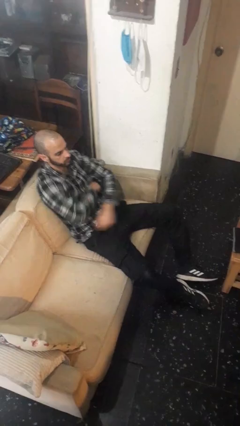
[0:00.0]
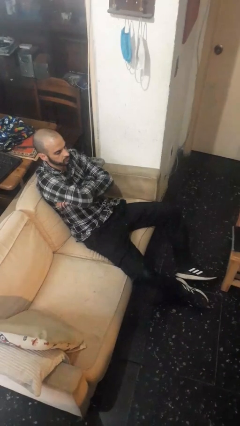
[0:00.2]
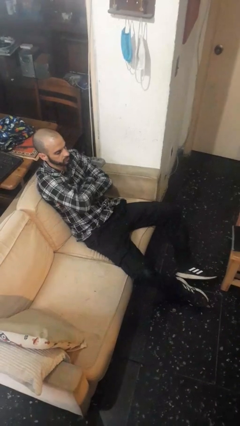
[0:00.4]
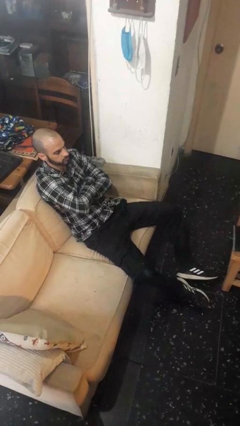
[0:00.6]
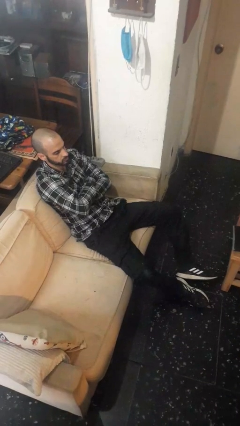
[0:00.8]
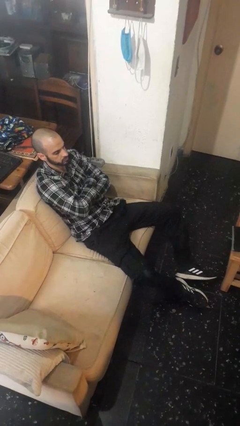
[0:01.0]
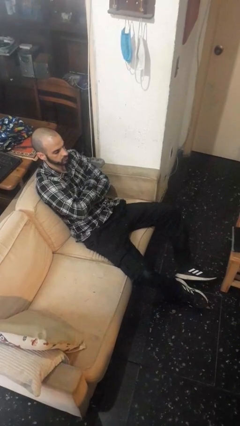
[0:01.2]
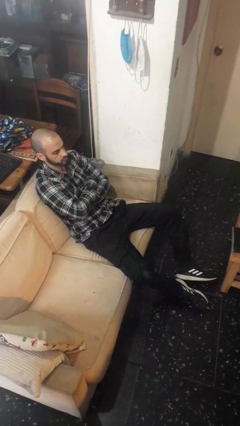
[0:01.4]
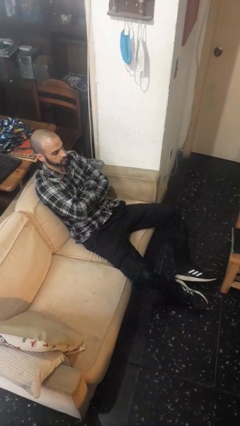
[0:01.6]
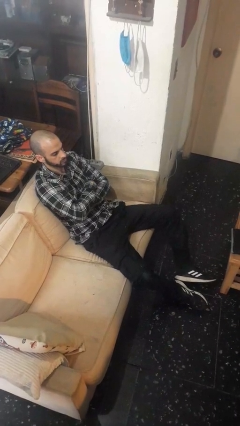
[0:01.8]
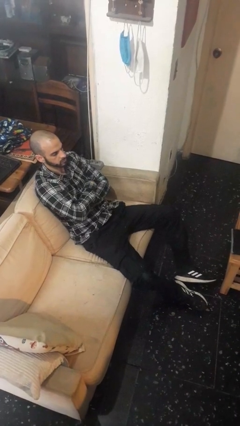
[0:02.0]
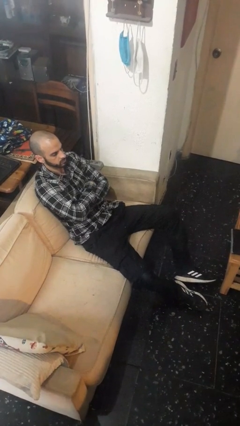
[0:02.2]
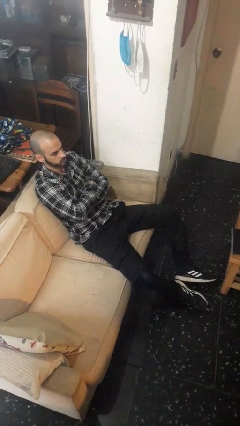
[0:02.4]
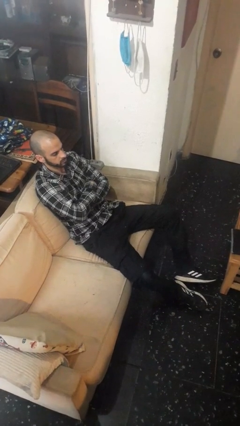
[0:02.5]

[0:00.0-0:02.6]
person crosses arms

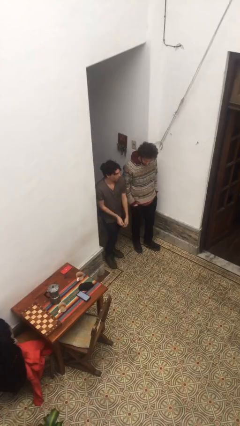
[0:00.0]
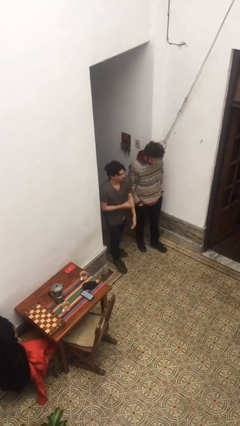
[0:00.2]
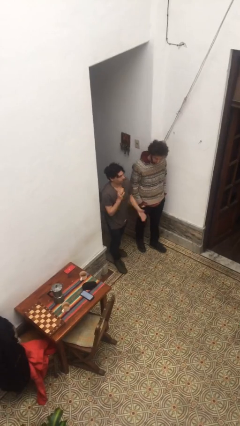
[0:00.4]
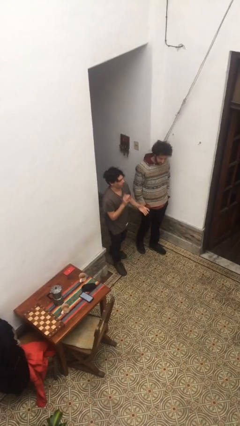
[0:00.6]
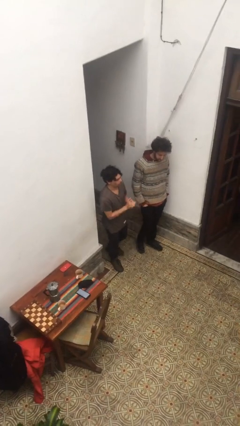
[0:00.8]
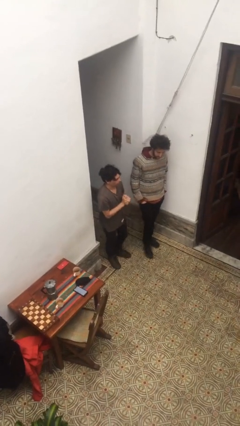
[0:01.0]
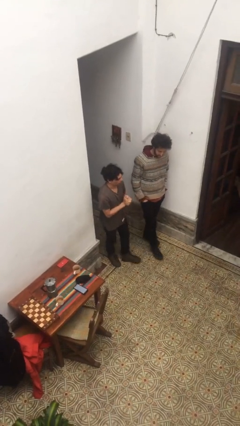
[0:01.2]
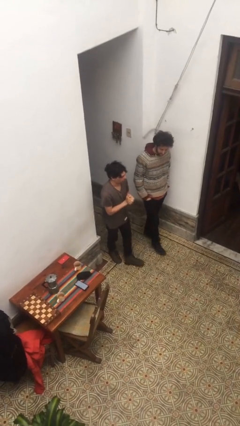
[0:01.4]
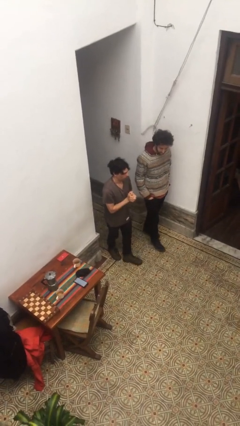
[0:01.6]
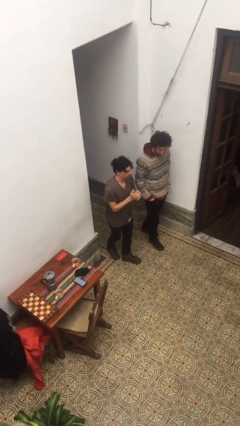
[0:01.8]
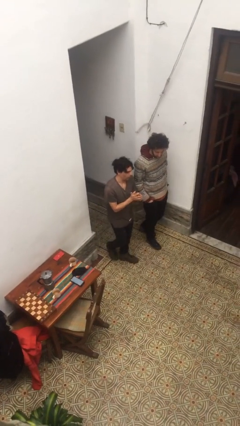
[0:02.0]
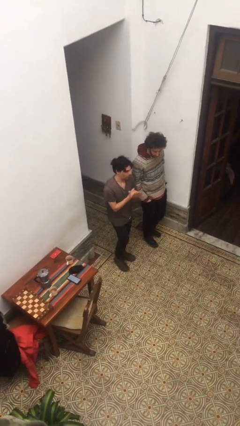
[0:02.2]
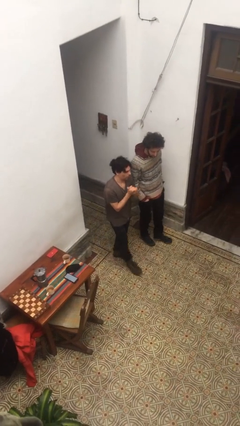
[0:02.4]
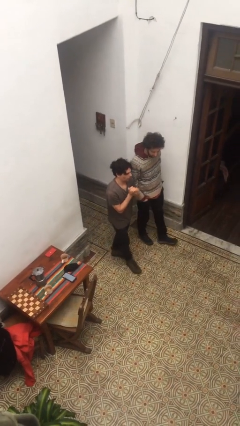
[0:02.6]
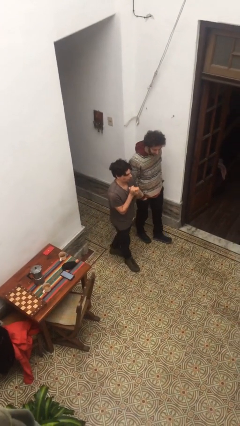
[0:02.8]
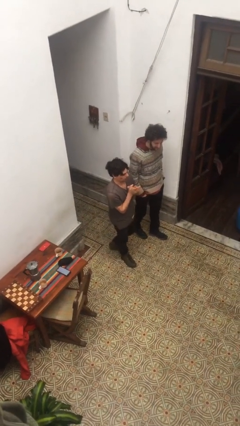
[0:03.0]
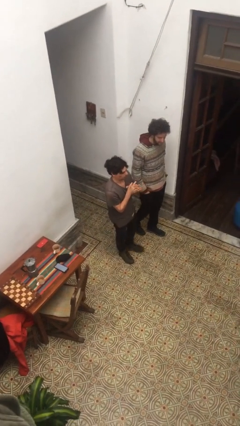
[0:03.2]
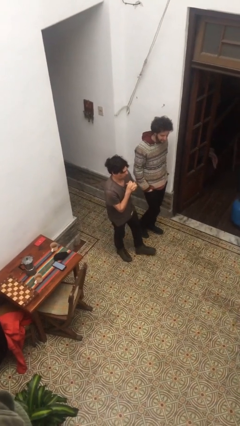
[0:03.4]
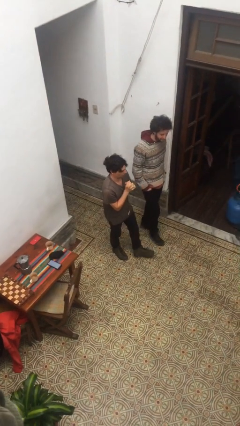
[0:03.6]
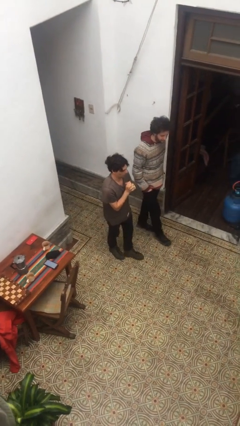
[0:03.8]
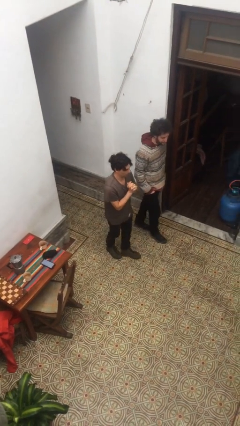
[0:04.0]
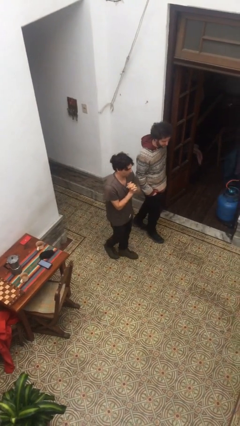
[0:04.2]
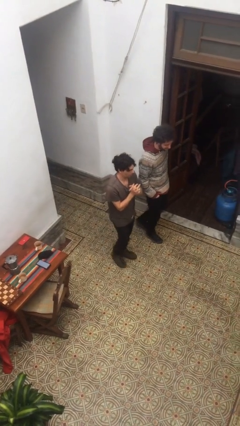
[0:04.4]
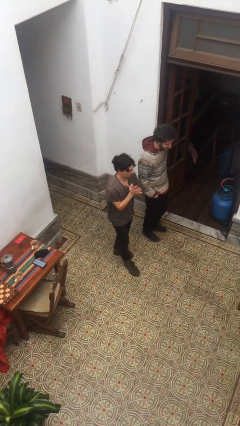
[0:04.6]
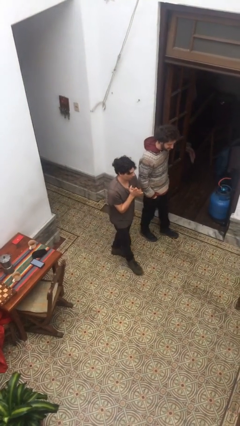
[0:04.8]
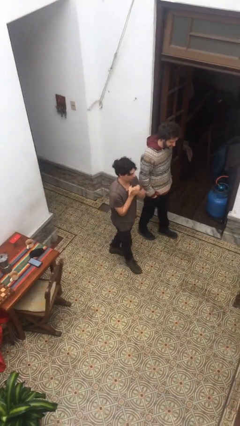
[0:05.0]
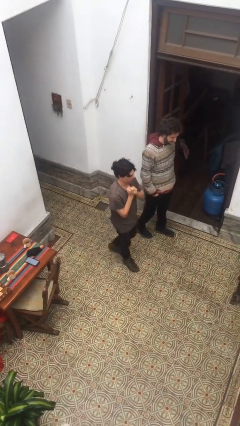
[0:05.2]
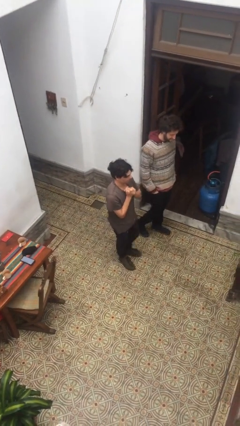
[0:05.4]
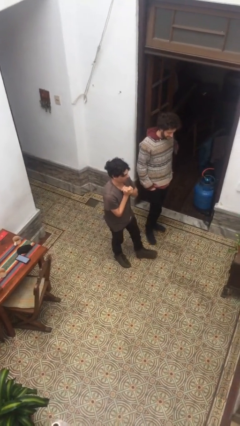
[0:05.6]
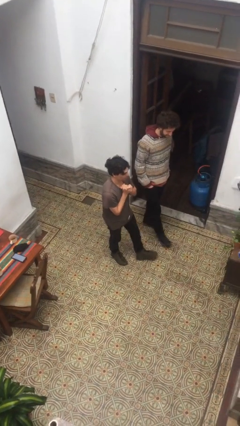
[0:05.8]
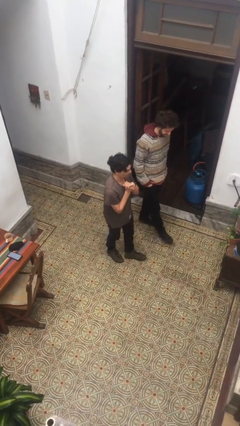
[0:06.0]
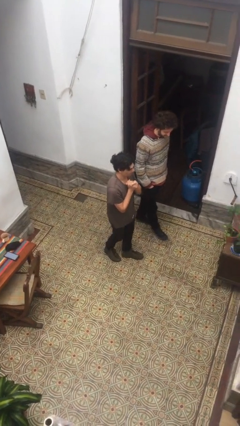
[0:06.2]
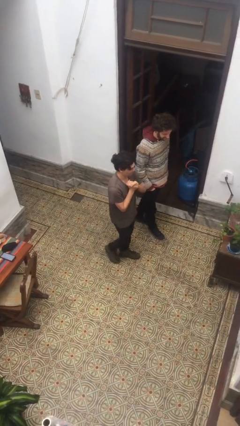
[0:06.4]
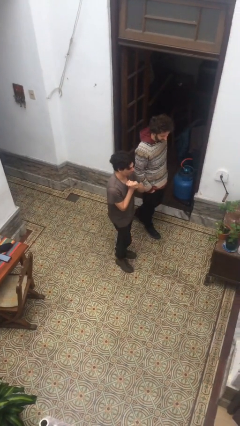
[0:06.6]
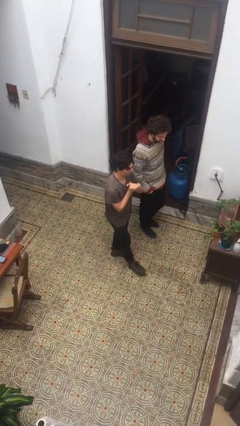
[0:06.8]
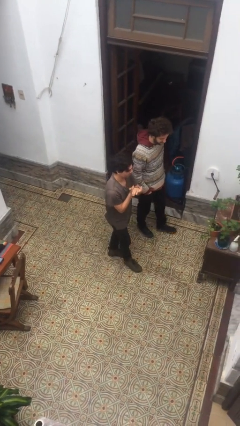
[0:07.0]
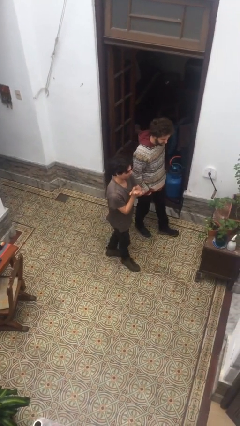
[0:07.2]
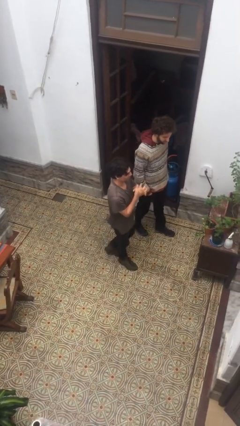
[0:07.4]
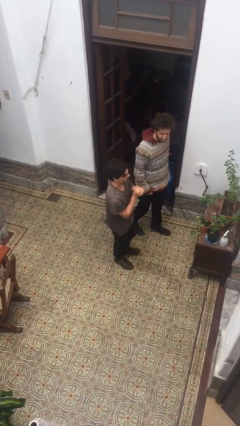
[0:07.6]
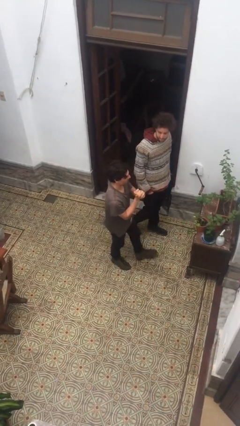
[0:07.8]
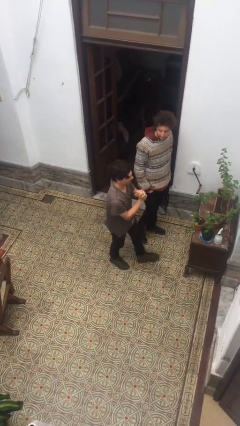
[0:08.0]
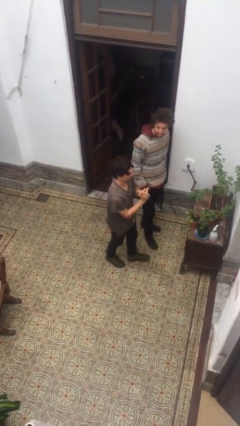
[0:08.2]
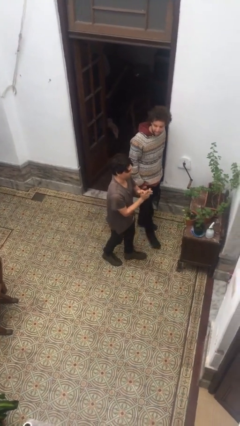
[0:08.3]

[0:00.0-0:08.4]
person talks to person

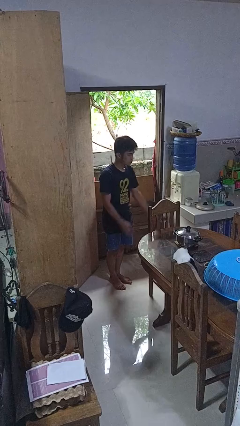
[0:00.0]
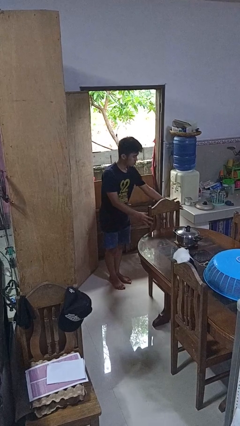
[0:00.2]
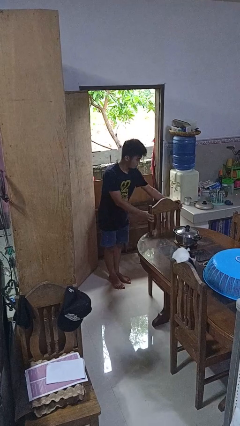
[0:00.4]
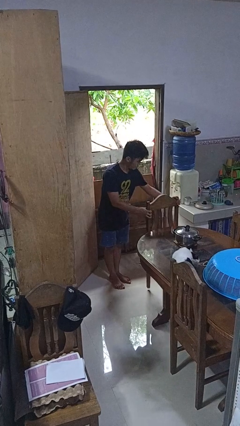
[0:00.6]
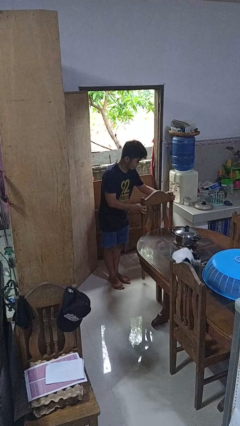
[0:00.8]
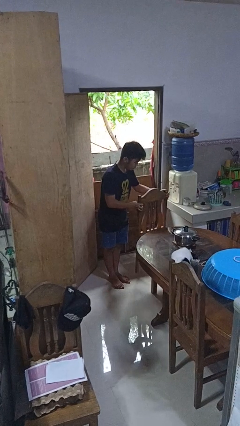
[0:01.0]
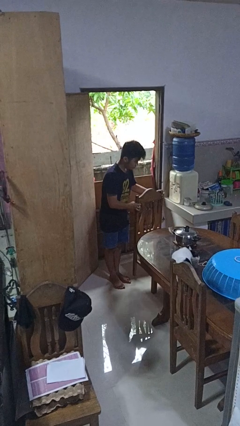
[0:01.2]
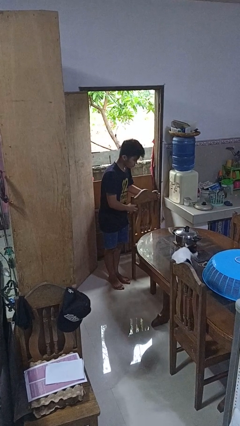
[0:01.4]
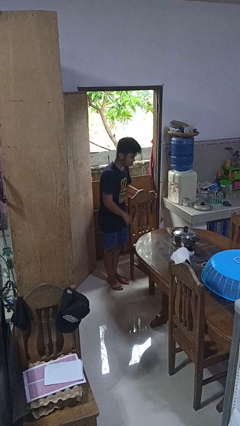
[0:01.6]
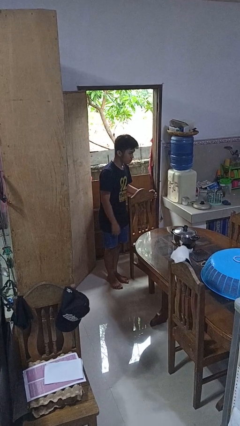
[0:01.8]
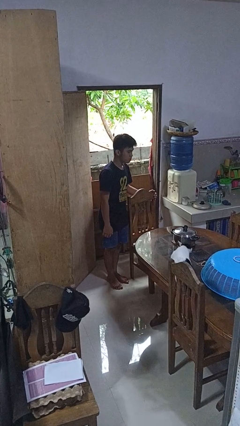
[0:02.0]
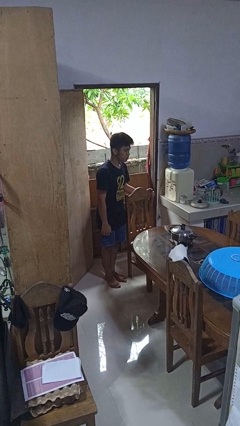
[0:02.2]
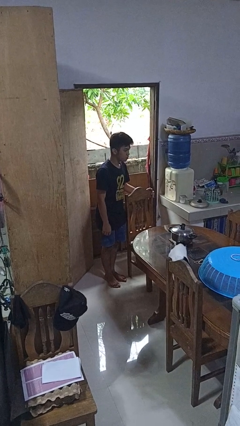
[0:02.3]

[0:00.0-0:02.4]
person pulls out chair

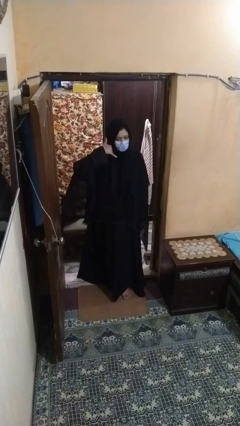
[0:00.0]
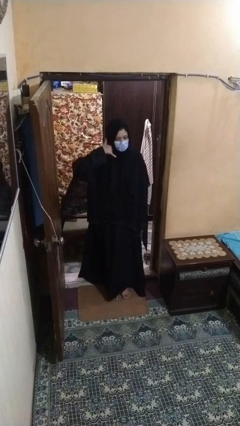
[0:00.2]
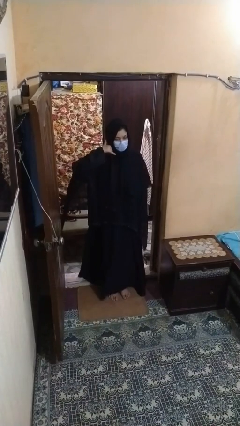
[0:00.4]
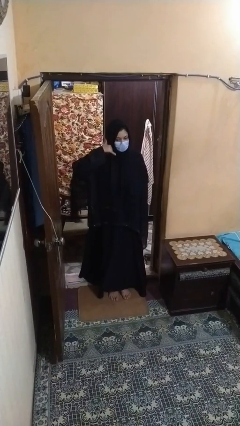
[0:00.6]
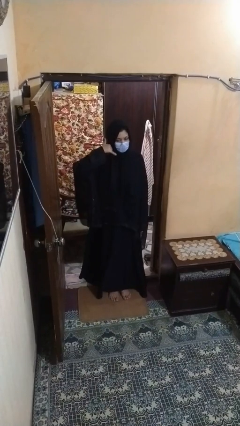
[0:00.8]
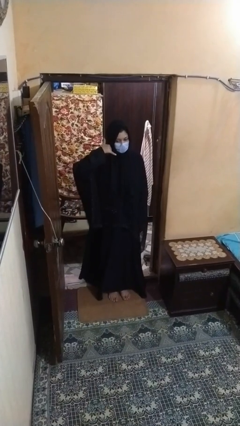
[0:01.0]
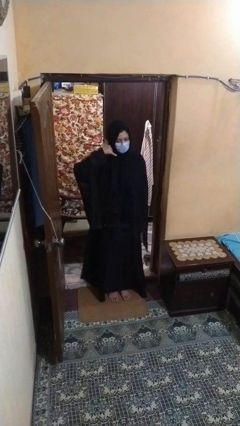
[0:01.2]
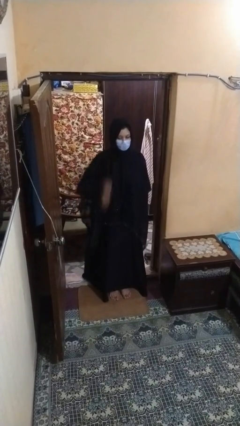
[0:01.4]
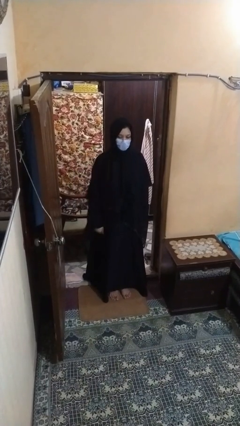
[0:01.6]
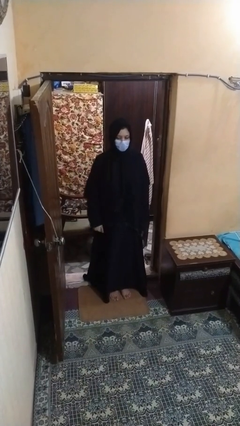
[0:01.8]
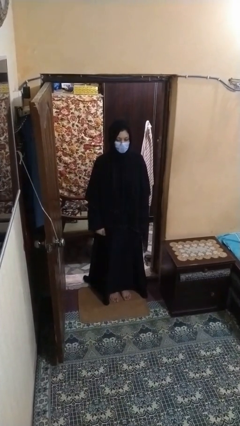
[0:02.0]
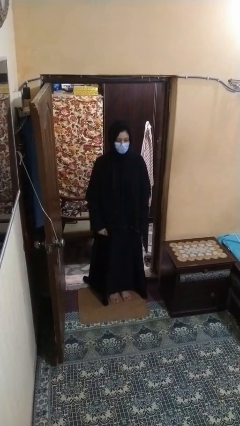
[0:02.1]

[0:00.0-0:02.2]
person gestures call me

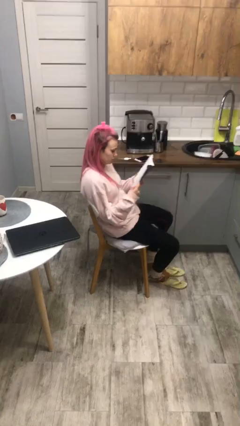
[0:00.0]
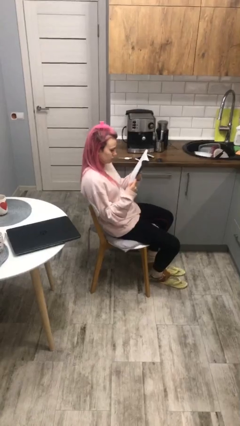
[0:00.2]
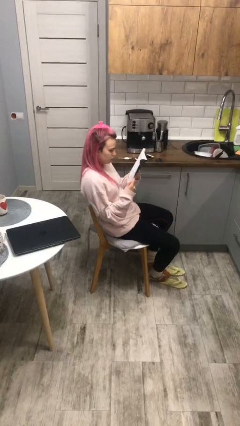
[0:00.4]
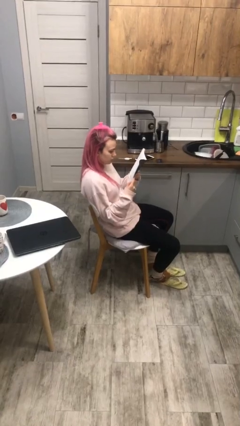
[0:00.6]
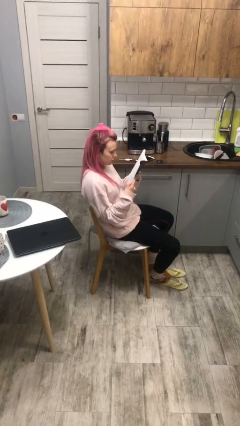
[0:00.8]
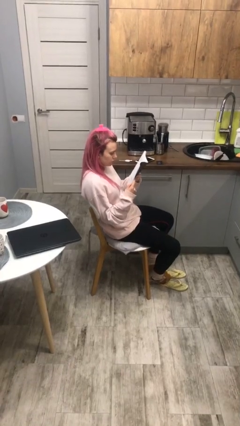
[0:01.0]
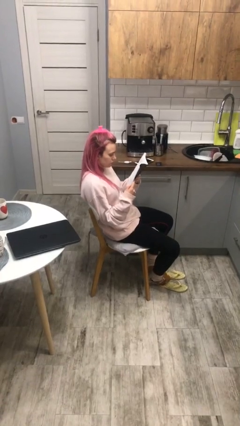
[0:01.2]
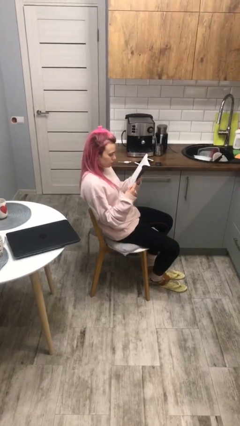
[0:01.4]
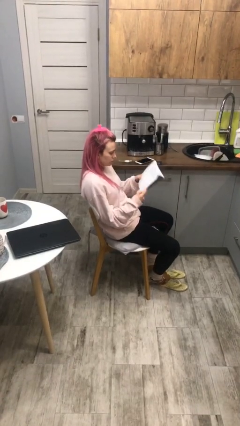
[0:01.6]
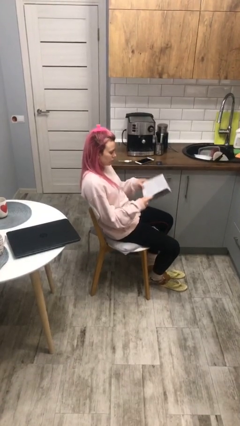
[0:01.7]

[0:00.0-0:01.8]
person reads document

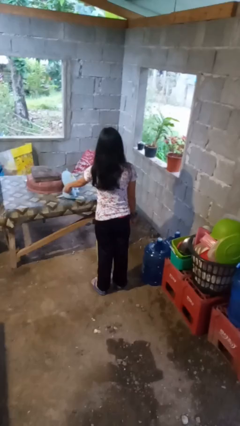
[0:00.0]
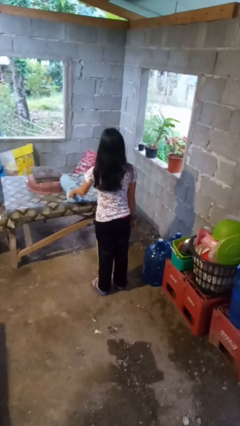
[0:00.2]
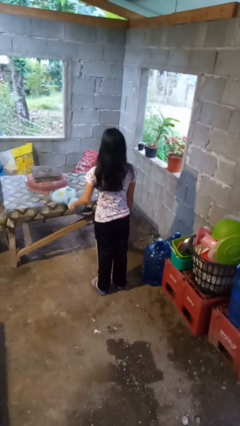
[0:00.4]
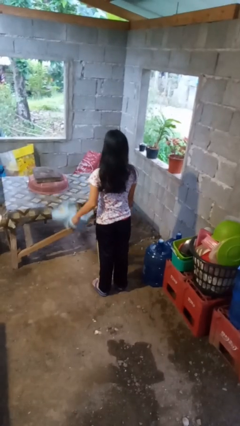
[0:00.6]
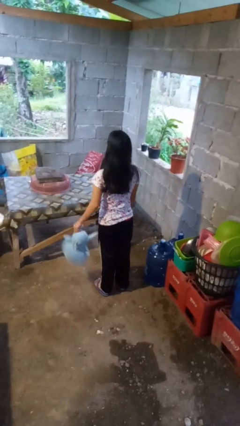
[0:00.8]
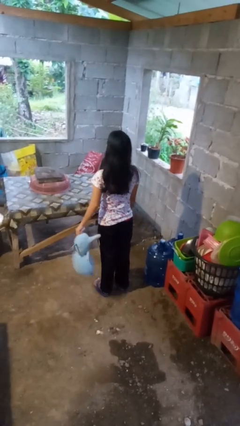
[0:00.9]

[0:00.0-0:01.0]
person picks up object from table
